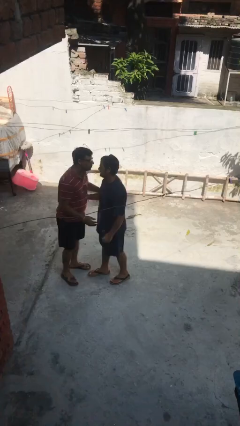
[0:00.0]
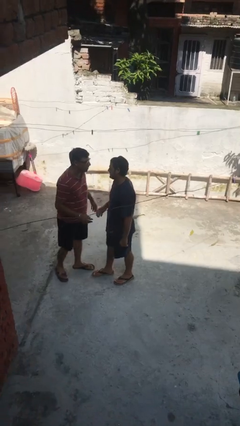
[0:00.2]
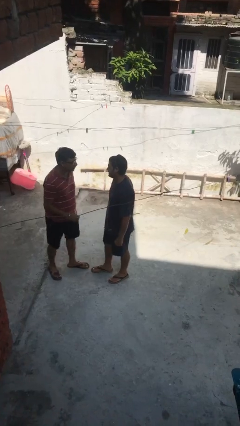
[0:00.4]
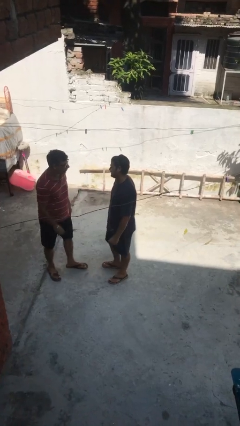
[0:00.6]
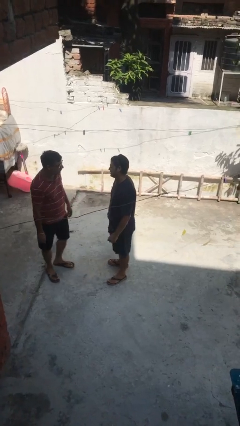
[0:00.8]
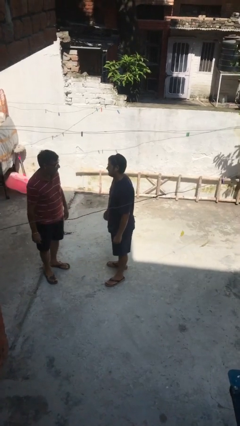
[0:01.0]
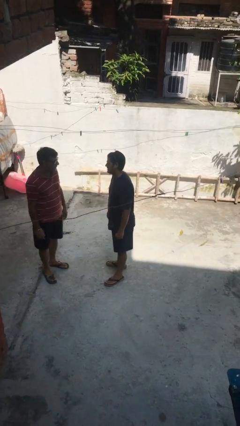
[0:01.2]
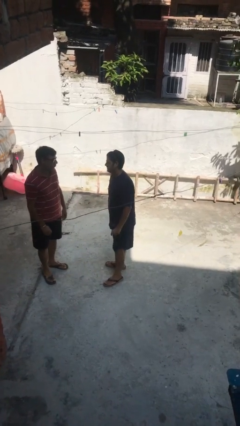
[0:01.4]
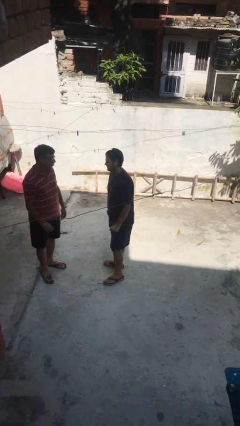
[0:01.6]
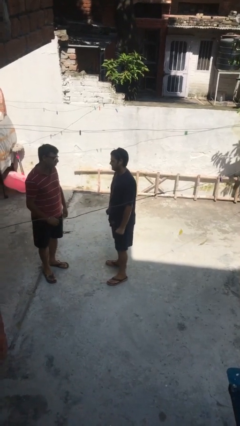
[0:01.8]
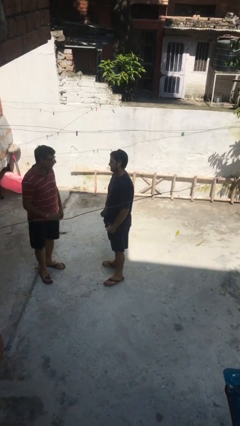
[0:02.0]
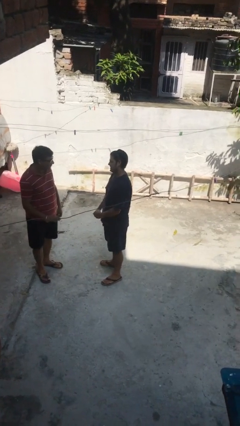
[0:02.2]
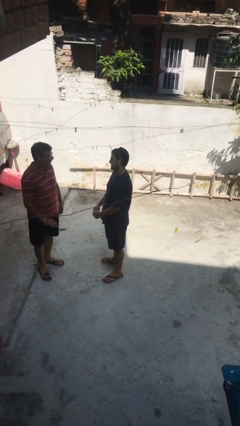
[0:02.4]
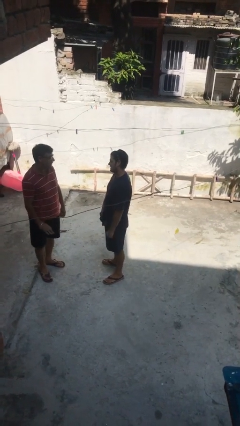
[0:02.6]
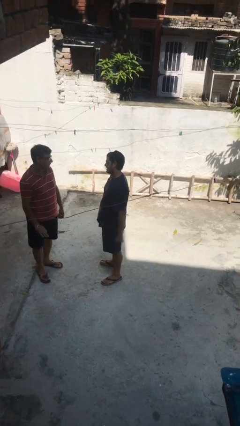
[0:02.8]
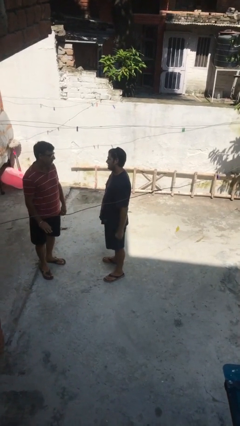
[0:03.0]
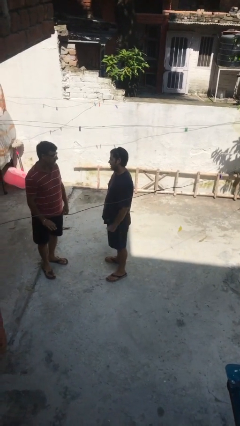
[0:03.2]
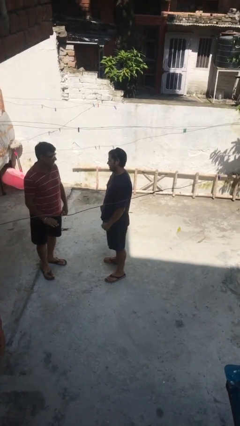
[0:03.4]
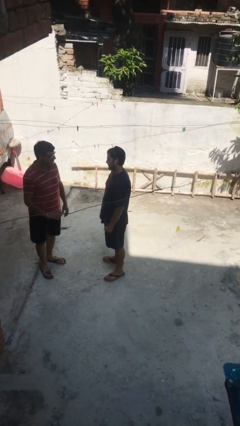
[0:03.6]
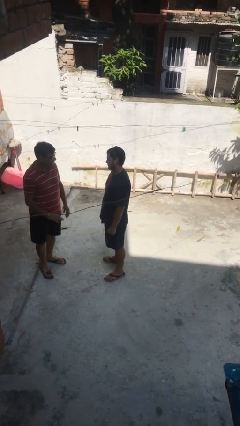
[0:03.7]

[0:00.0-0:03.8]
person talks to person

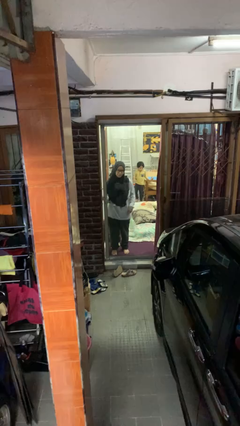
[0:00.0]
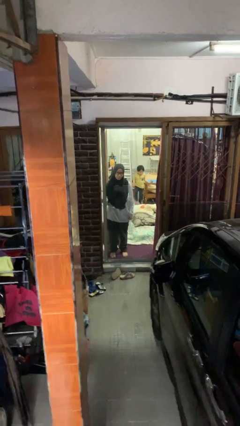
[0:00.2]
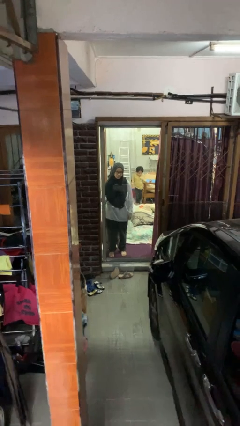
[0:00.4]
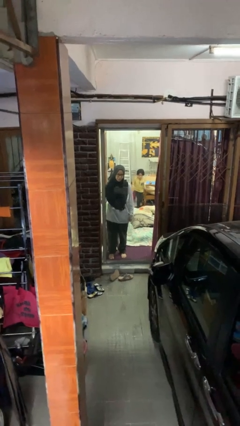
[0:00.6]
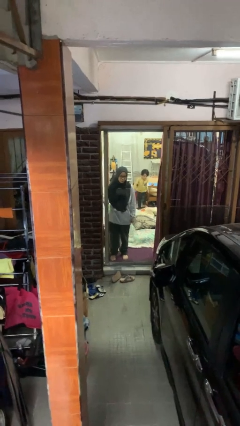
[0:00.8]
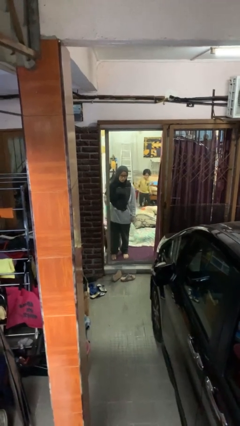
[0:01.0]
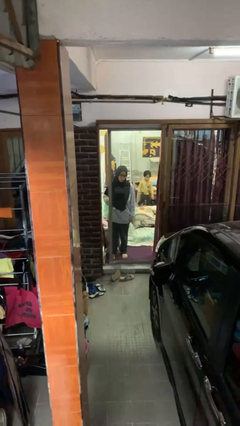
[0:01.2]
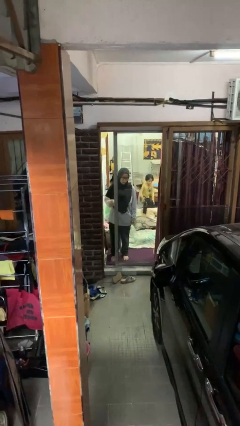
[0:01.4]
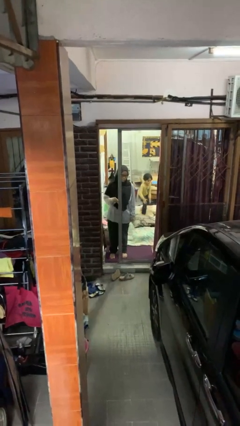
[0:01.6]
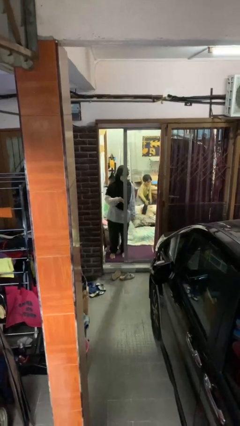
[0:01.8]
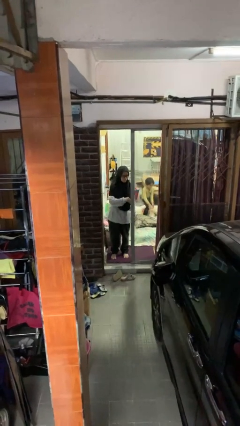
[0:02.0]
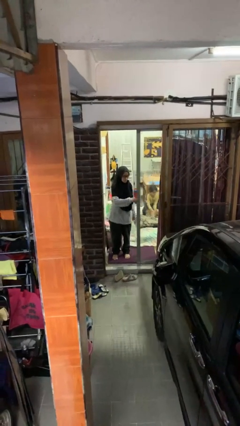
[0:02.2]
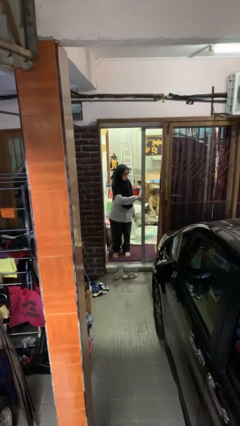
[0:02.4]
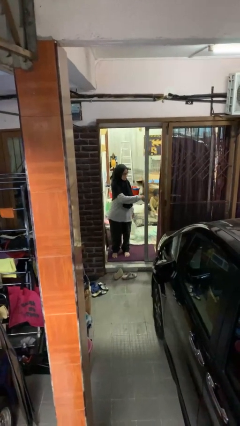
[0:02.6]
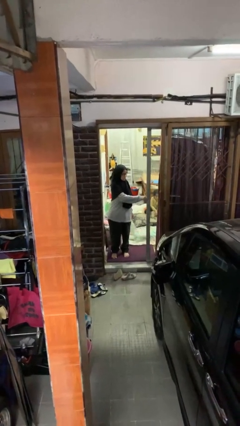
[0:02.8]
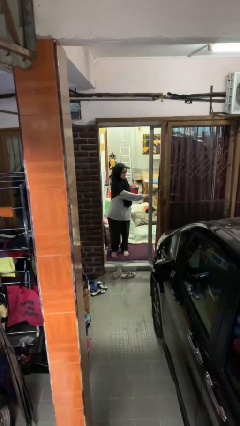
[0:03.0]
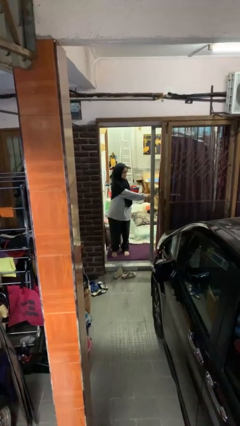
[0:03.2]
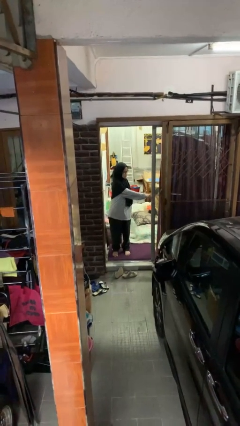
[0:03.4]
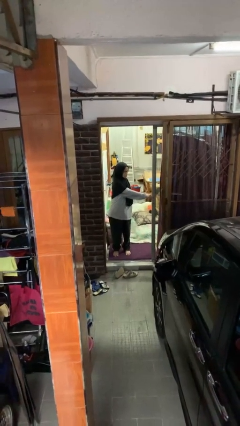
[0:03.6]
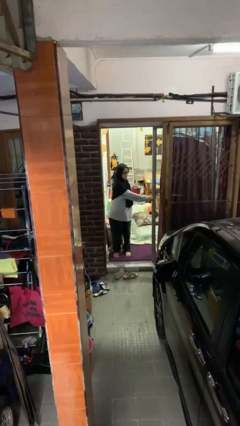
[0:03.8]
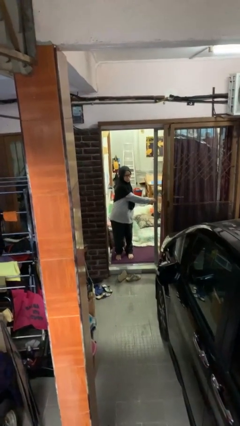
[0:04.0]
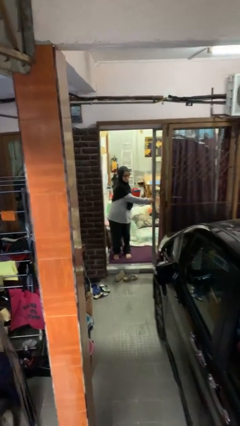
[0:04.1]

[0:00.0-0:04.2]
person opens sliding door

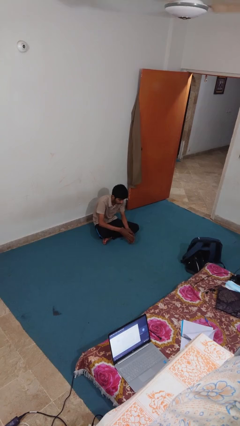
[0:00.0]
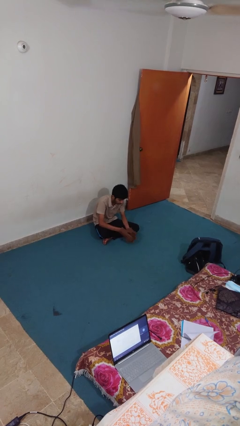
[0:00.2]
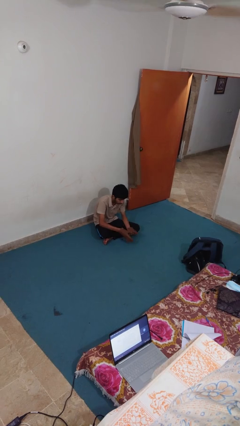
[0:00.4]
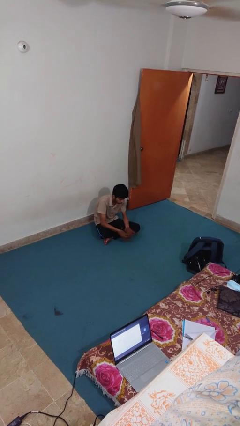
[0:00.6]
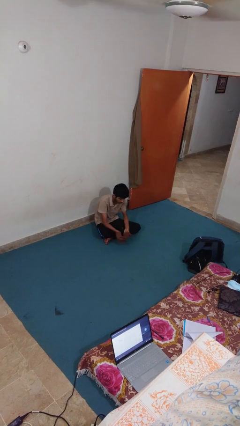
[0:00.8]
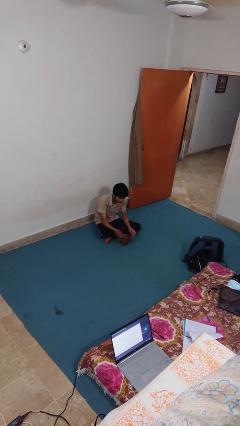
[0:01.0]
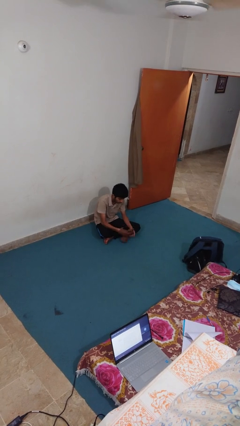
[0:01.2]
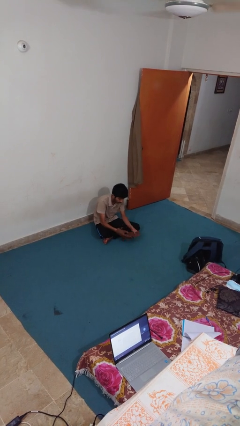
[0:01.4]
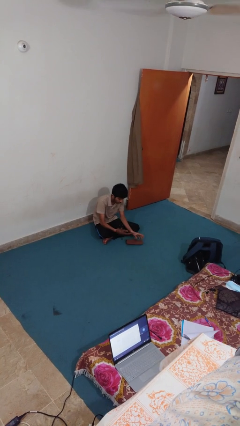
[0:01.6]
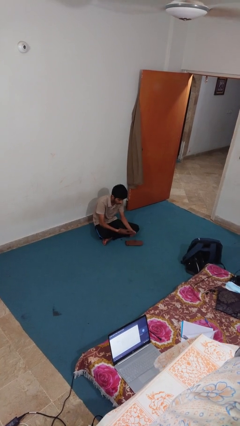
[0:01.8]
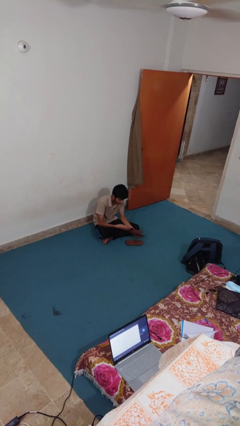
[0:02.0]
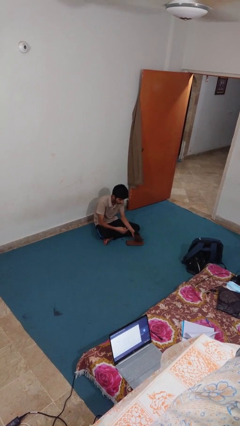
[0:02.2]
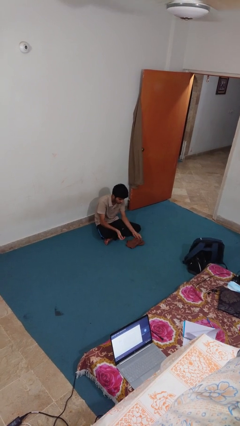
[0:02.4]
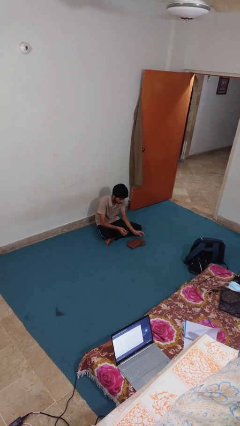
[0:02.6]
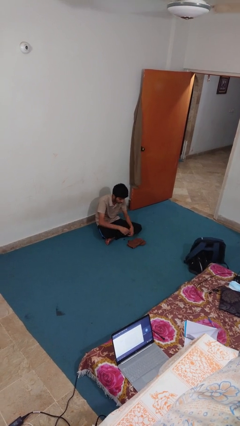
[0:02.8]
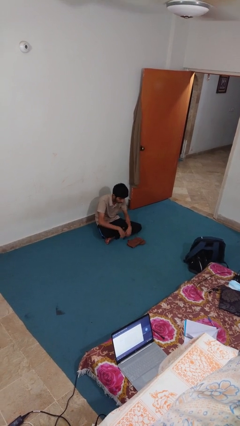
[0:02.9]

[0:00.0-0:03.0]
person takes off gloves

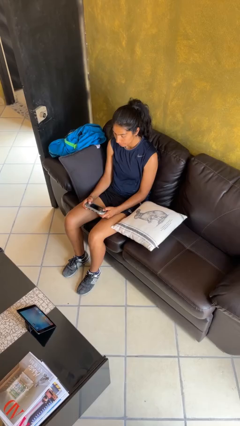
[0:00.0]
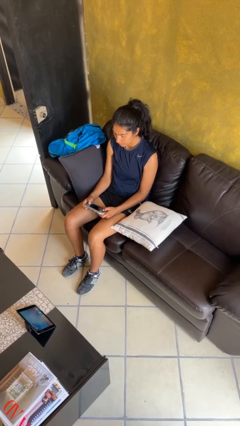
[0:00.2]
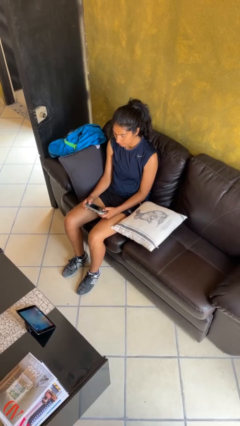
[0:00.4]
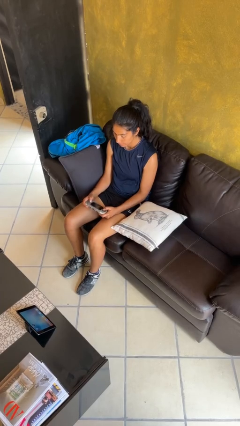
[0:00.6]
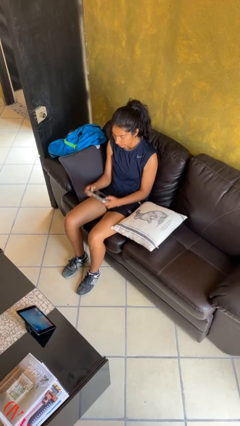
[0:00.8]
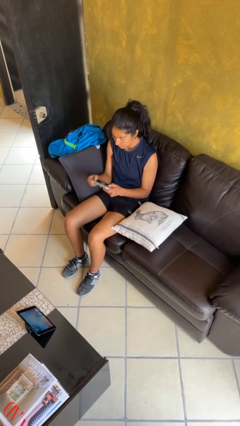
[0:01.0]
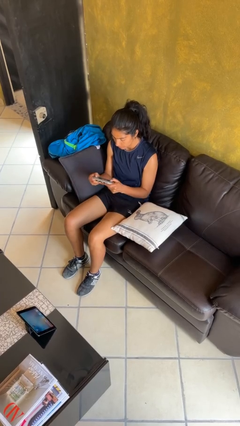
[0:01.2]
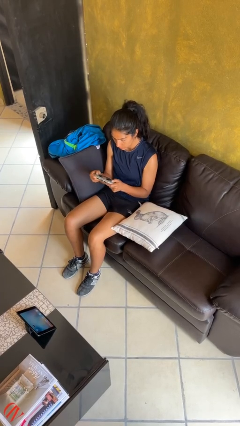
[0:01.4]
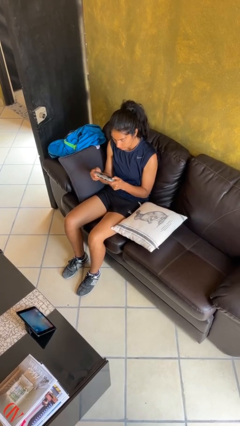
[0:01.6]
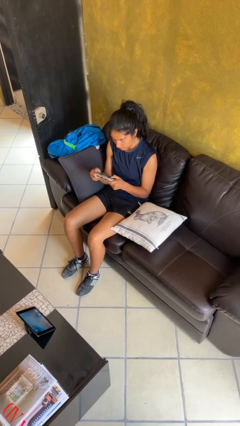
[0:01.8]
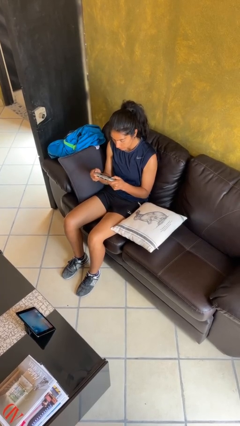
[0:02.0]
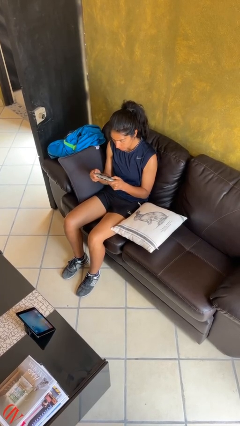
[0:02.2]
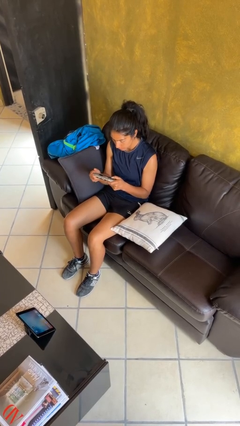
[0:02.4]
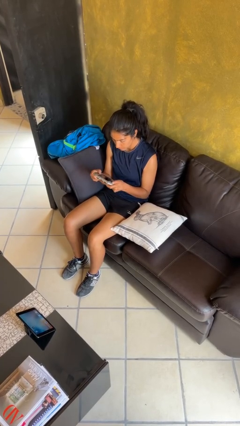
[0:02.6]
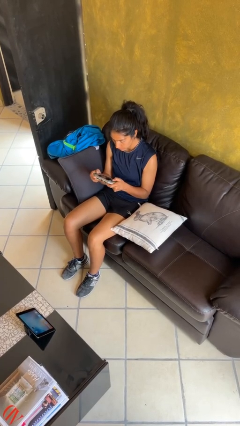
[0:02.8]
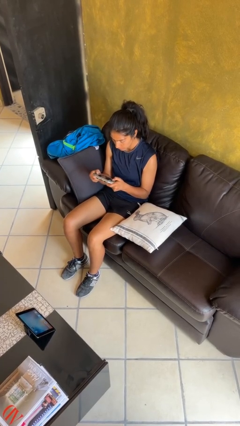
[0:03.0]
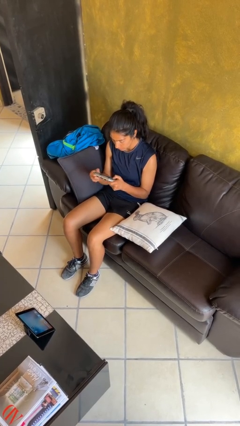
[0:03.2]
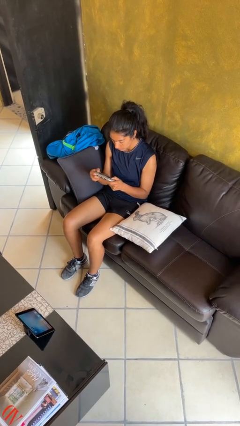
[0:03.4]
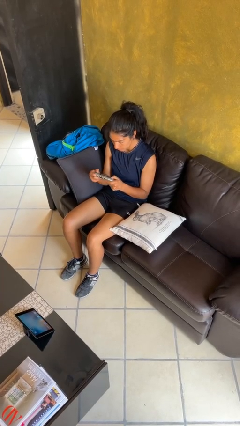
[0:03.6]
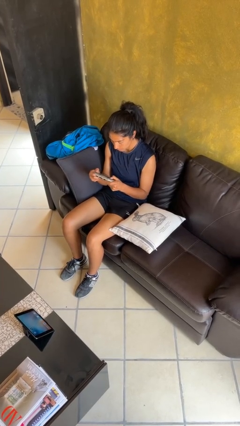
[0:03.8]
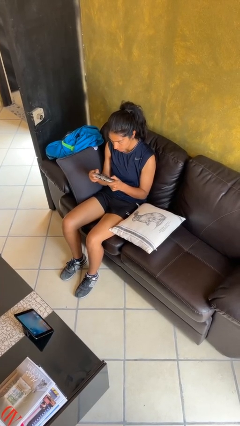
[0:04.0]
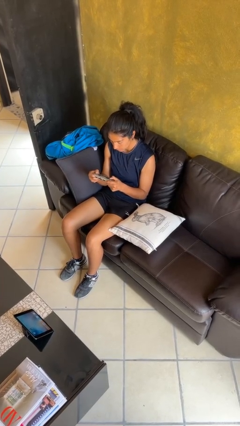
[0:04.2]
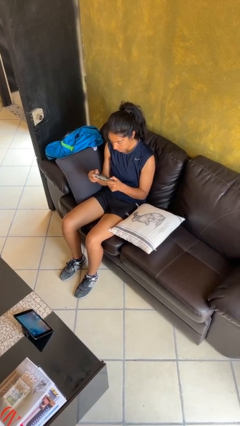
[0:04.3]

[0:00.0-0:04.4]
person interacts with handheld game

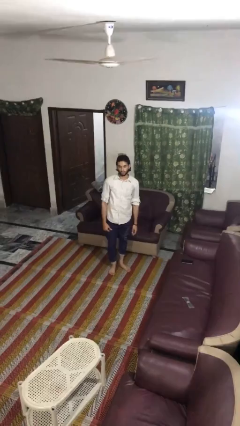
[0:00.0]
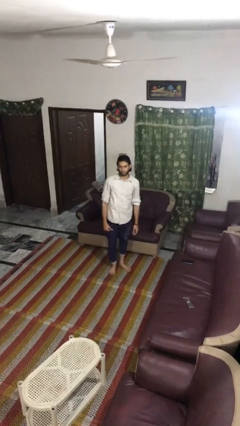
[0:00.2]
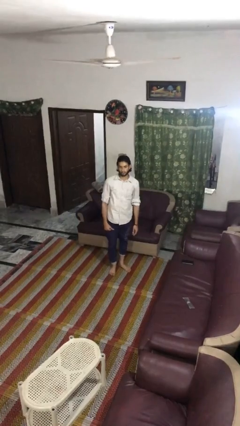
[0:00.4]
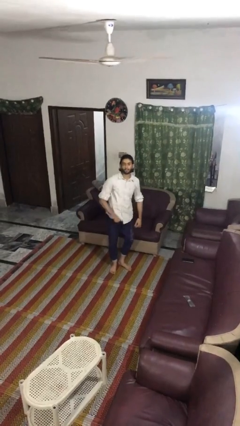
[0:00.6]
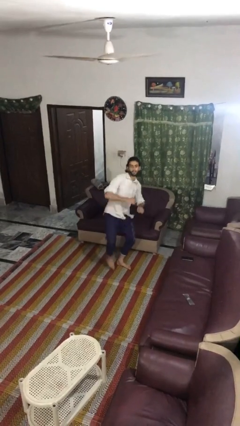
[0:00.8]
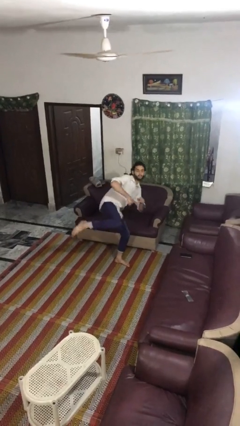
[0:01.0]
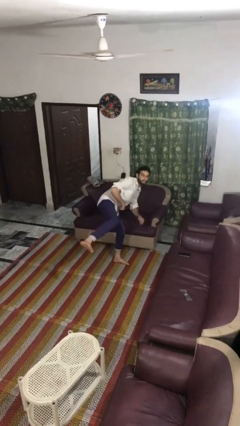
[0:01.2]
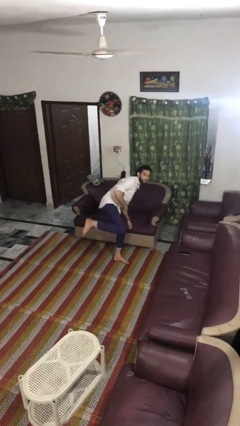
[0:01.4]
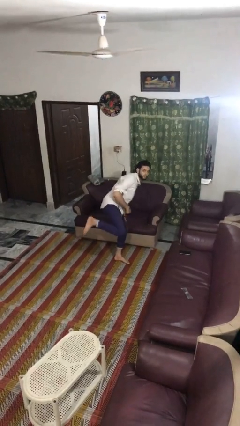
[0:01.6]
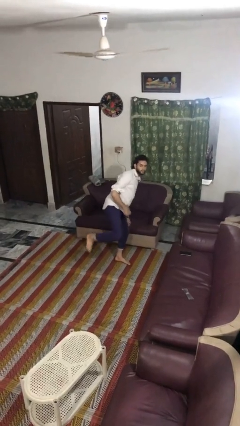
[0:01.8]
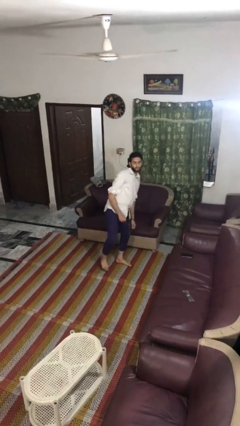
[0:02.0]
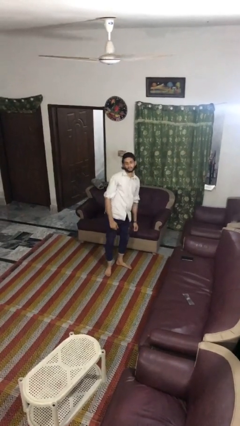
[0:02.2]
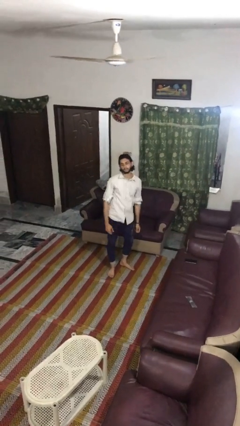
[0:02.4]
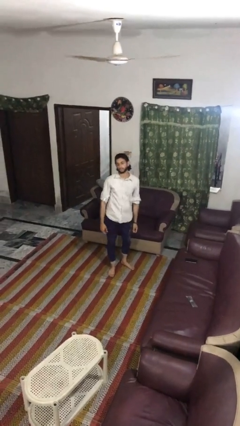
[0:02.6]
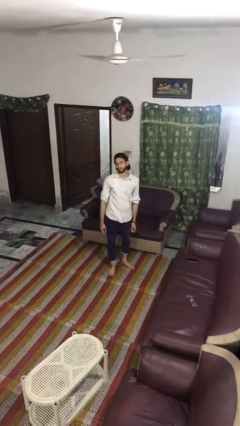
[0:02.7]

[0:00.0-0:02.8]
person karate kicks
